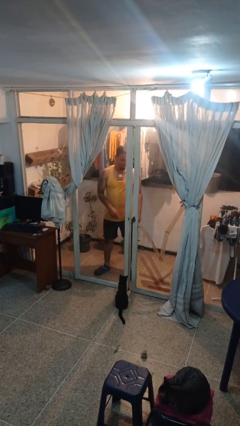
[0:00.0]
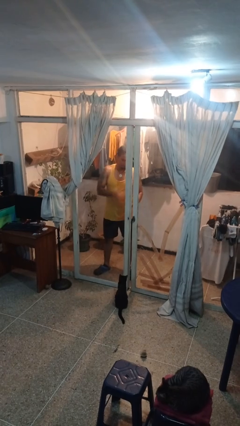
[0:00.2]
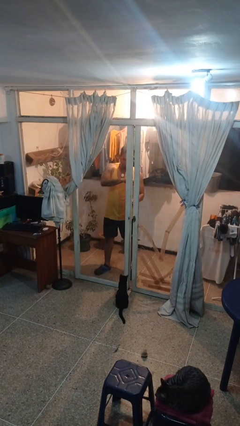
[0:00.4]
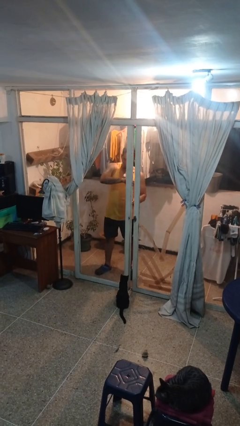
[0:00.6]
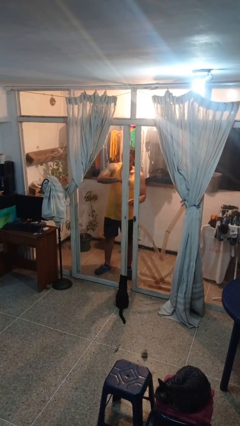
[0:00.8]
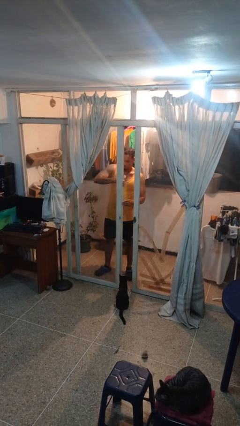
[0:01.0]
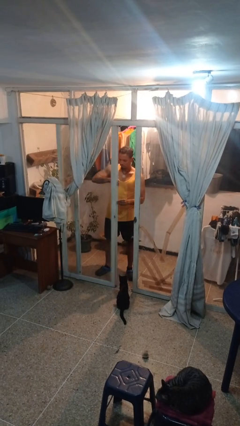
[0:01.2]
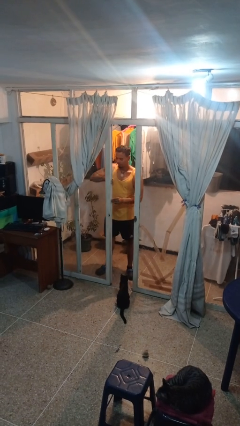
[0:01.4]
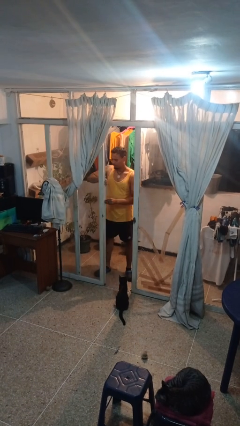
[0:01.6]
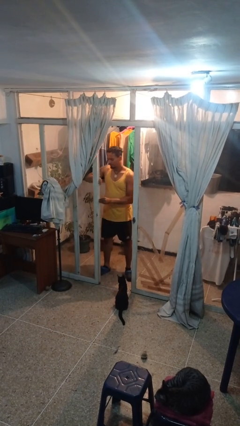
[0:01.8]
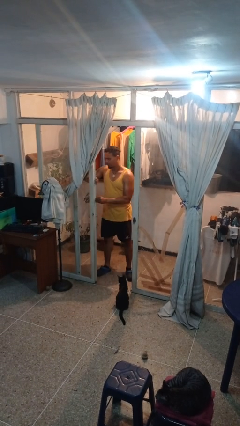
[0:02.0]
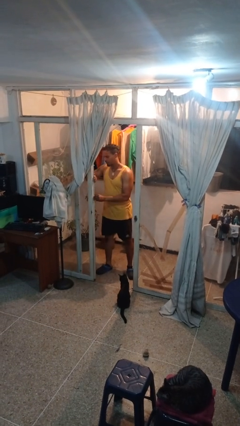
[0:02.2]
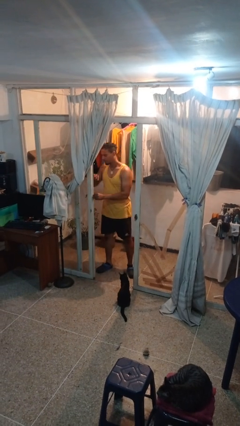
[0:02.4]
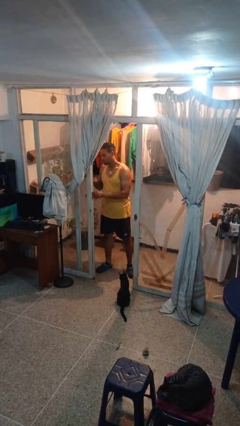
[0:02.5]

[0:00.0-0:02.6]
person opens sliding door

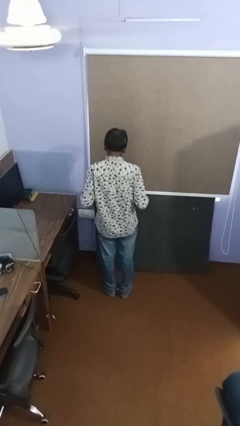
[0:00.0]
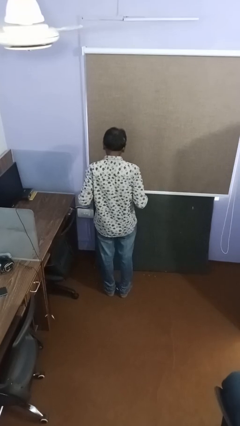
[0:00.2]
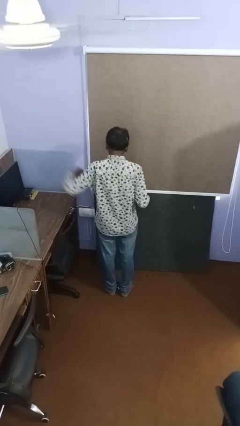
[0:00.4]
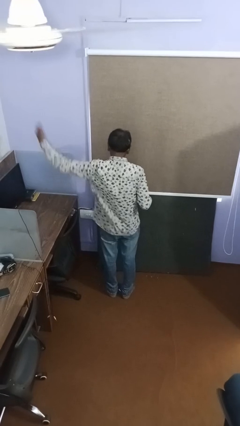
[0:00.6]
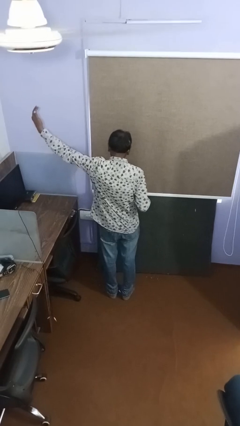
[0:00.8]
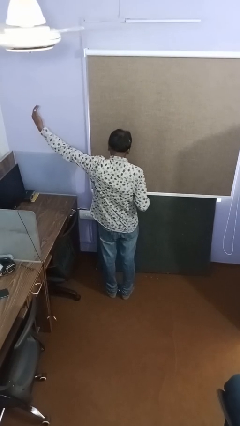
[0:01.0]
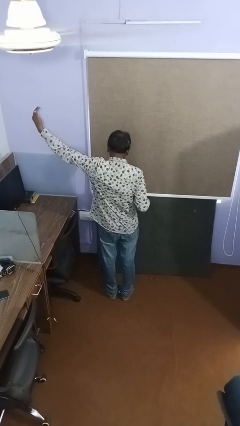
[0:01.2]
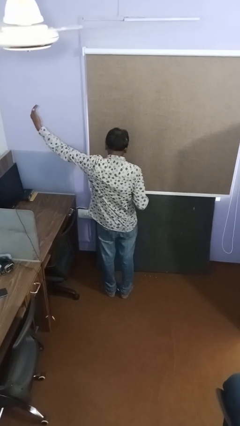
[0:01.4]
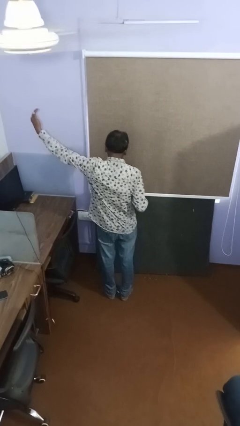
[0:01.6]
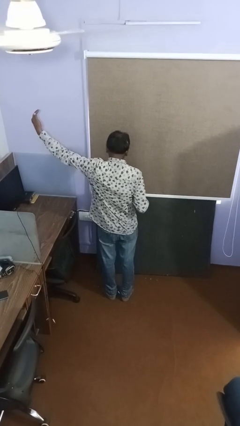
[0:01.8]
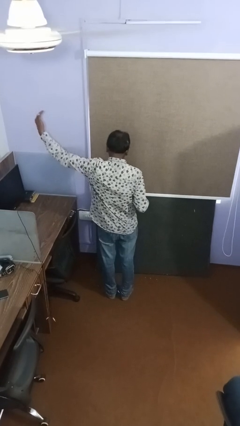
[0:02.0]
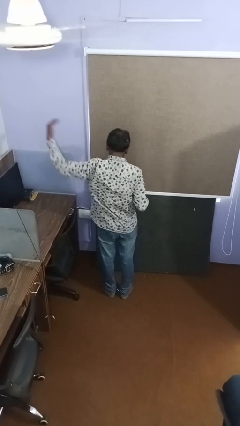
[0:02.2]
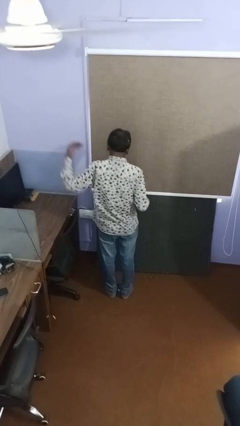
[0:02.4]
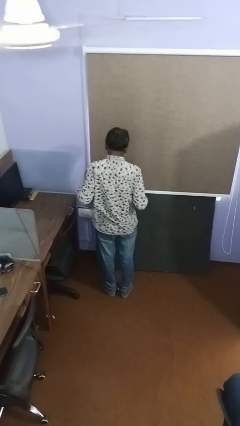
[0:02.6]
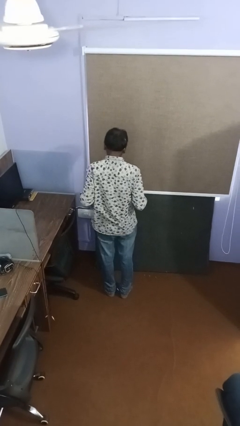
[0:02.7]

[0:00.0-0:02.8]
person gestures swipe left

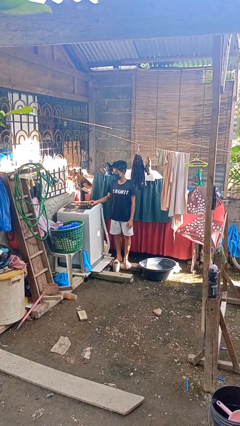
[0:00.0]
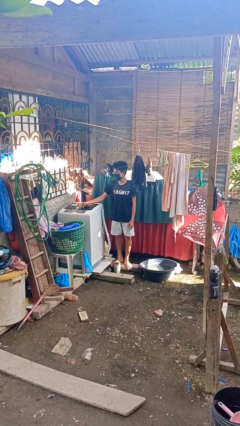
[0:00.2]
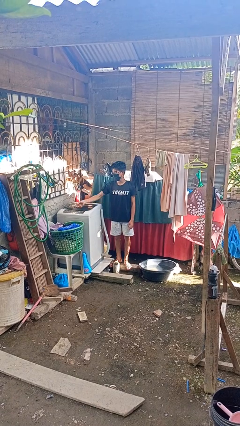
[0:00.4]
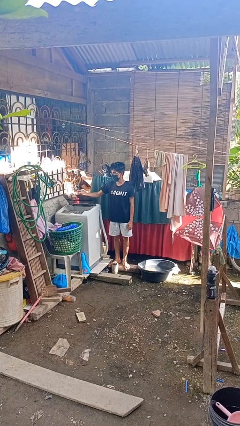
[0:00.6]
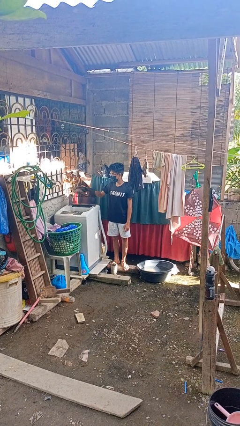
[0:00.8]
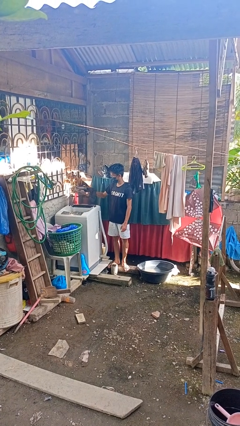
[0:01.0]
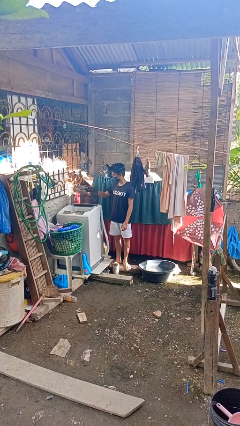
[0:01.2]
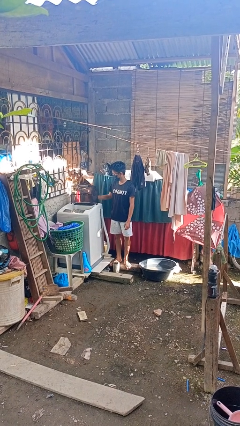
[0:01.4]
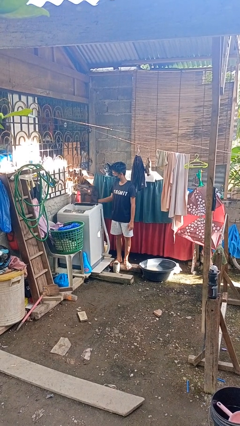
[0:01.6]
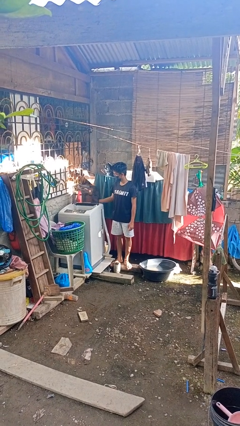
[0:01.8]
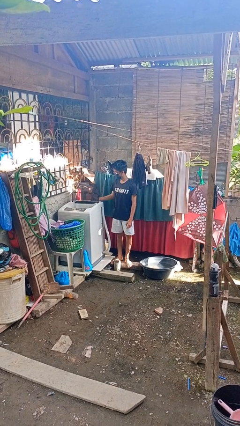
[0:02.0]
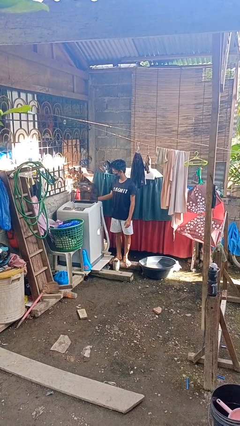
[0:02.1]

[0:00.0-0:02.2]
person opens clothes washer

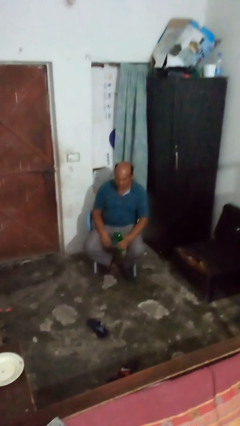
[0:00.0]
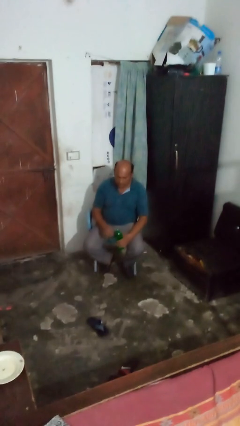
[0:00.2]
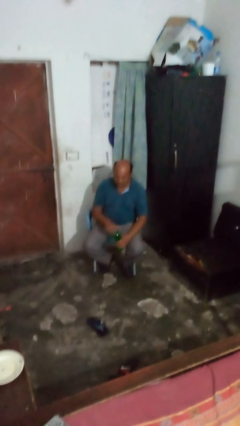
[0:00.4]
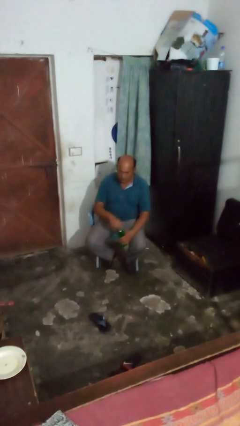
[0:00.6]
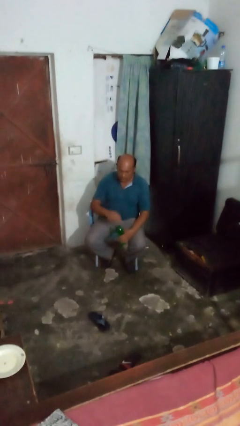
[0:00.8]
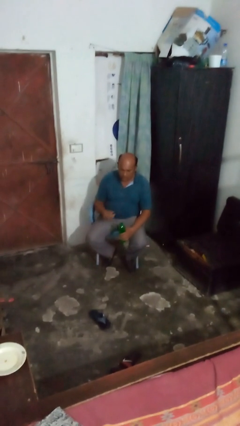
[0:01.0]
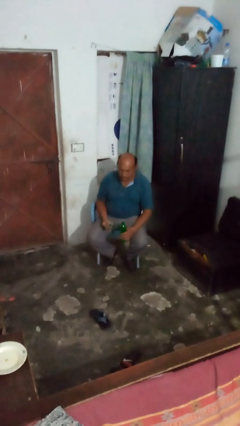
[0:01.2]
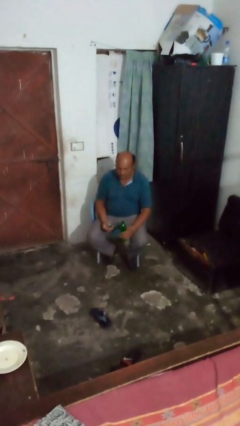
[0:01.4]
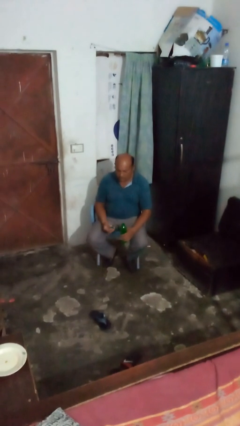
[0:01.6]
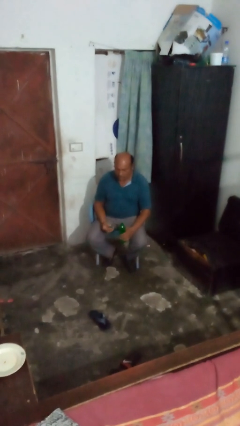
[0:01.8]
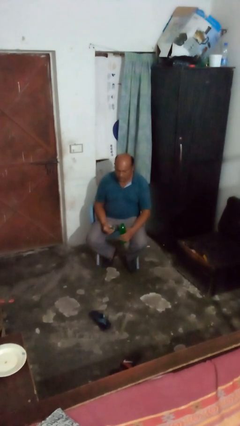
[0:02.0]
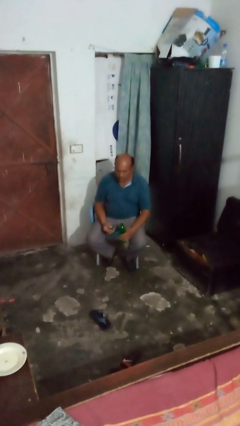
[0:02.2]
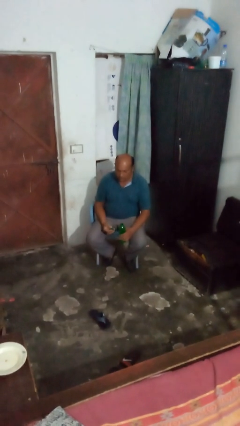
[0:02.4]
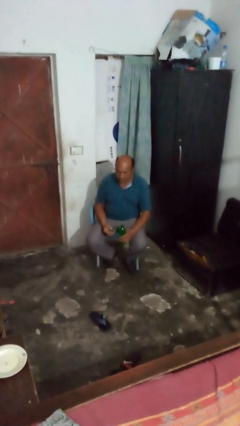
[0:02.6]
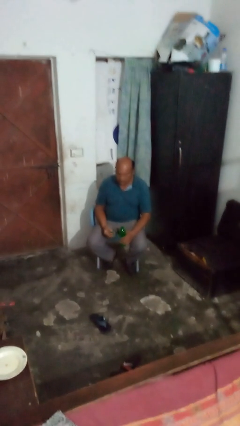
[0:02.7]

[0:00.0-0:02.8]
person unscrews lid from bottle

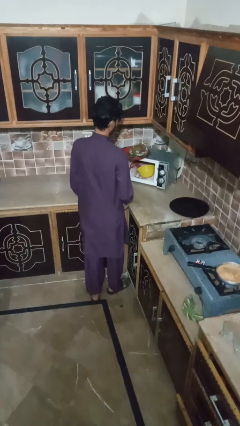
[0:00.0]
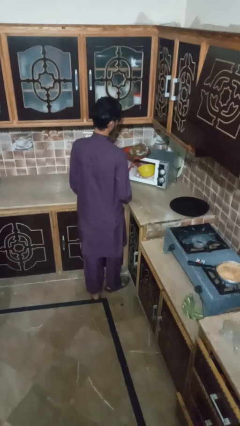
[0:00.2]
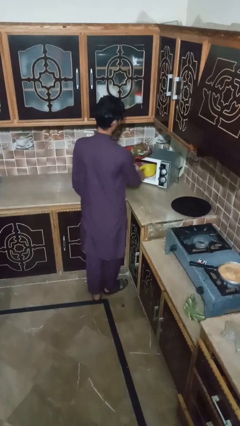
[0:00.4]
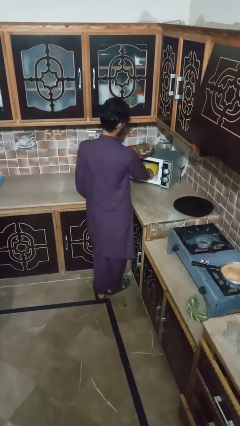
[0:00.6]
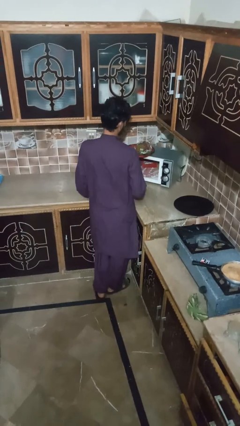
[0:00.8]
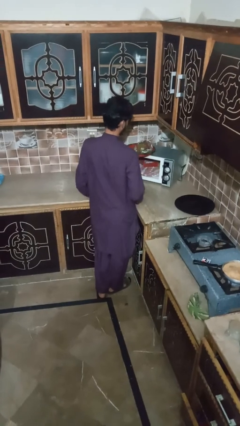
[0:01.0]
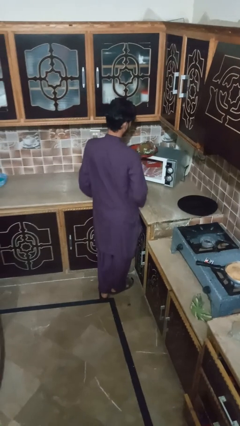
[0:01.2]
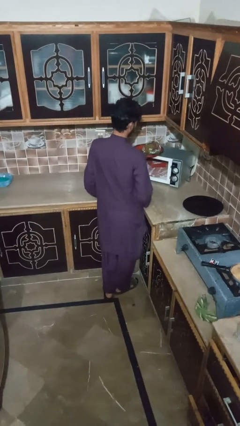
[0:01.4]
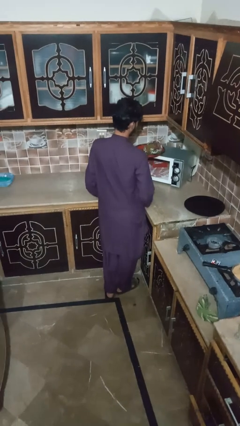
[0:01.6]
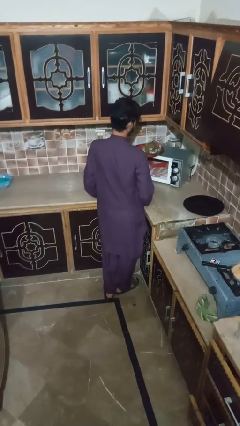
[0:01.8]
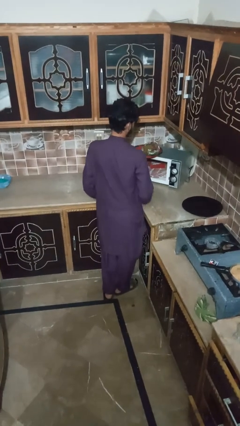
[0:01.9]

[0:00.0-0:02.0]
person takes object from microwave

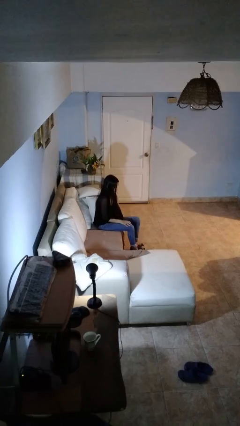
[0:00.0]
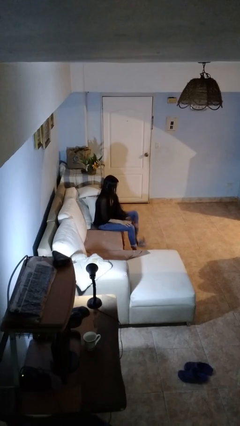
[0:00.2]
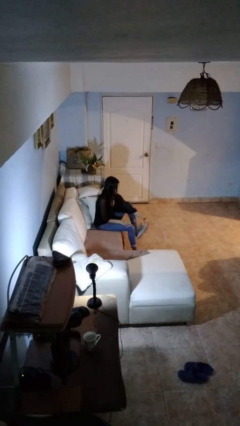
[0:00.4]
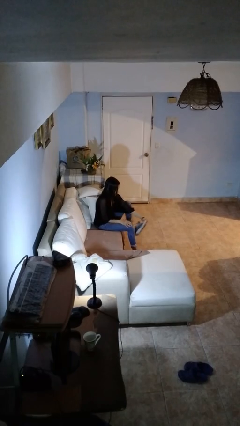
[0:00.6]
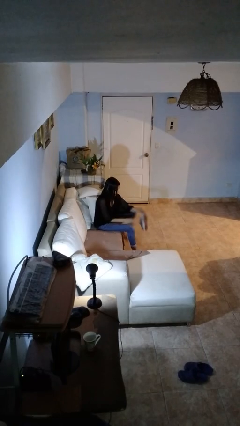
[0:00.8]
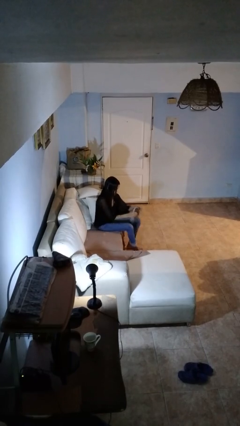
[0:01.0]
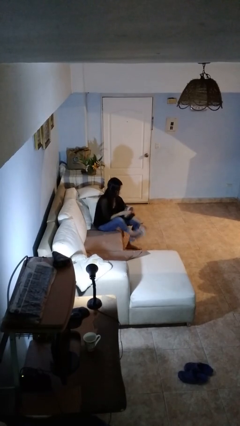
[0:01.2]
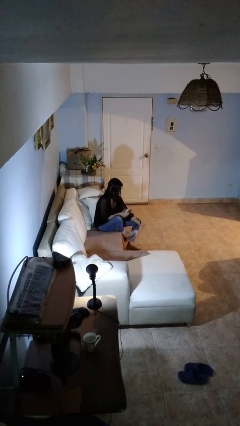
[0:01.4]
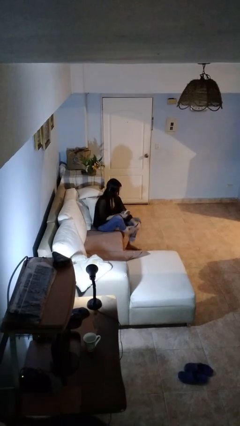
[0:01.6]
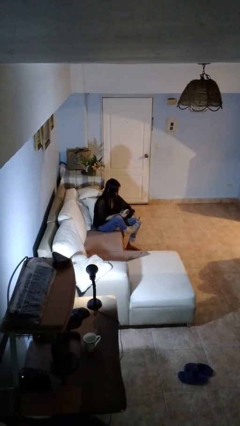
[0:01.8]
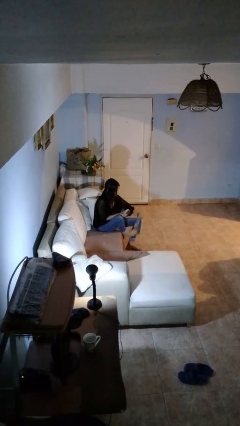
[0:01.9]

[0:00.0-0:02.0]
person takes off shoes

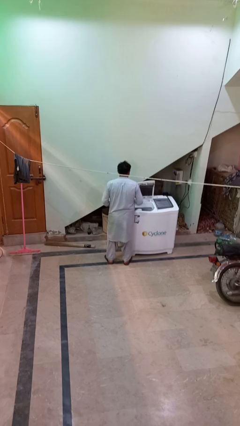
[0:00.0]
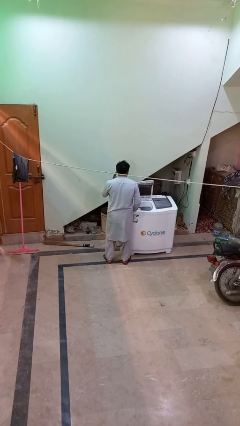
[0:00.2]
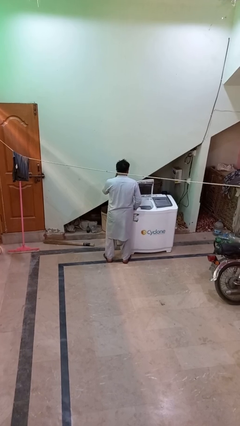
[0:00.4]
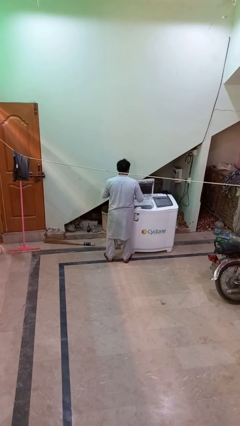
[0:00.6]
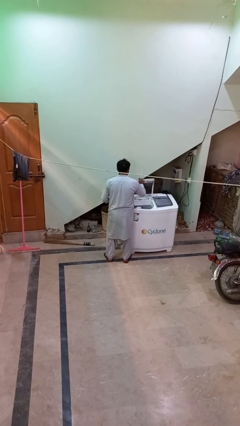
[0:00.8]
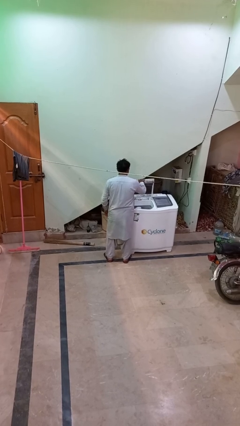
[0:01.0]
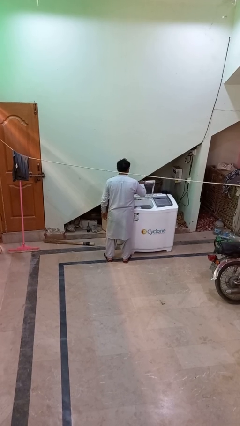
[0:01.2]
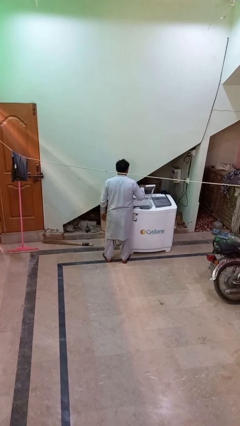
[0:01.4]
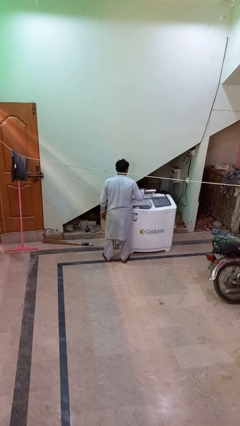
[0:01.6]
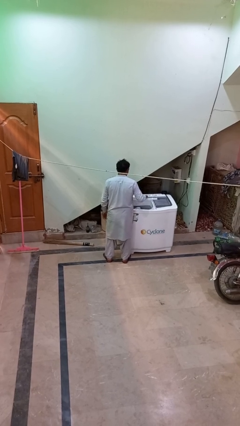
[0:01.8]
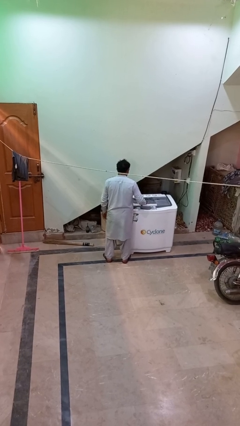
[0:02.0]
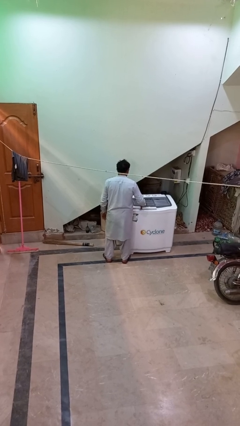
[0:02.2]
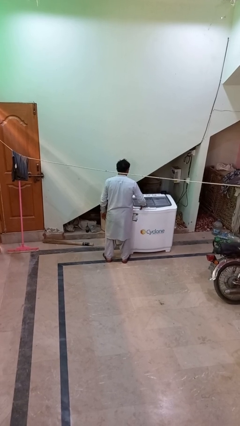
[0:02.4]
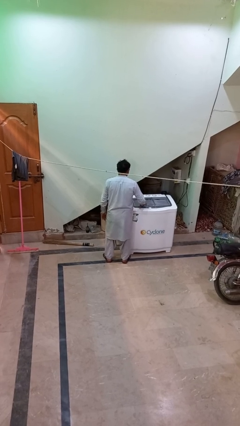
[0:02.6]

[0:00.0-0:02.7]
person closes clothes washer

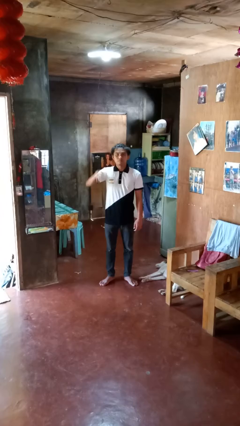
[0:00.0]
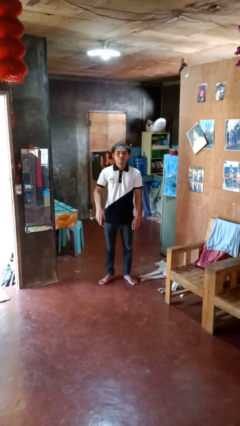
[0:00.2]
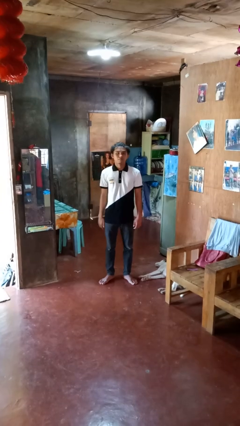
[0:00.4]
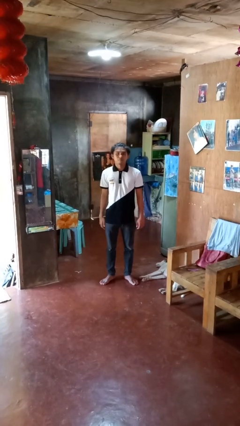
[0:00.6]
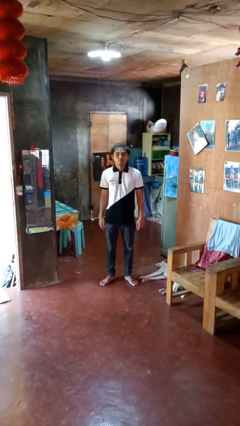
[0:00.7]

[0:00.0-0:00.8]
person gestures lower hand
